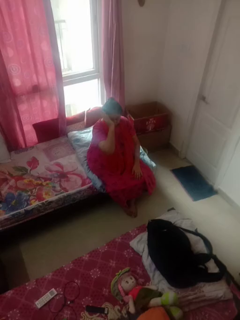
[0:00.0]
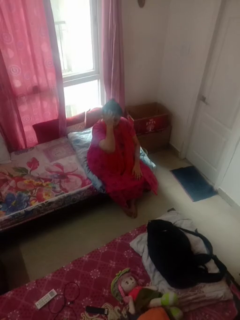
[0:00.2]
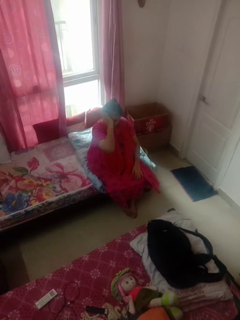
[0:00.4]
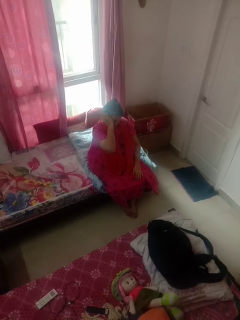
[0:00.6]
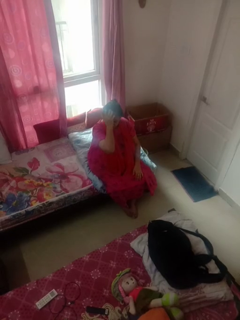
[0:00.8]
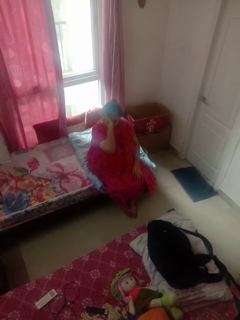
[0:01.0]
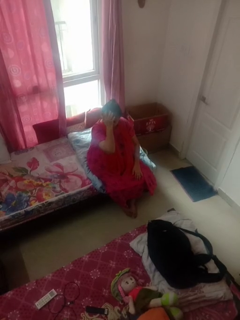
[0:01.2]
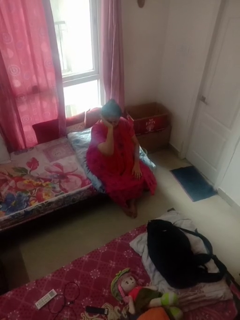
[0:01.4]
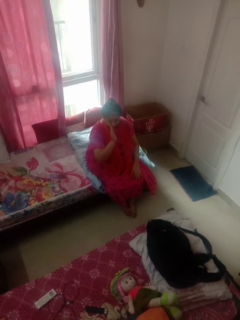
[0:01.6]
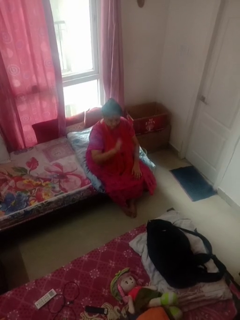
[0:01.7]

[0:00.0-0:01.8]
person rubs eyes

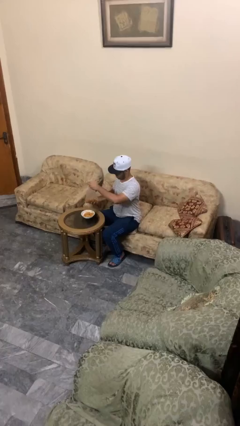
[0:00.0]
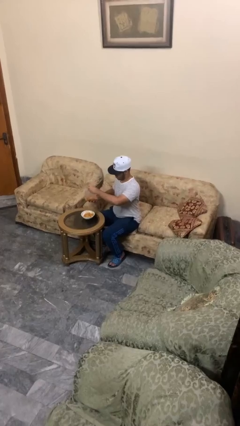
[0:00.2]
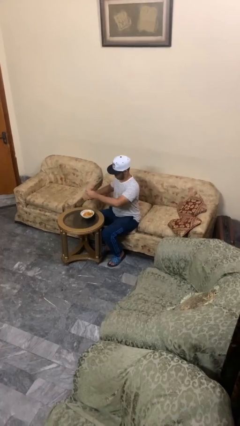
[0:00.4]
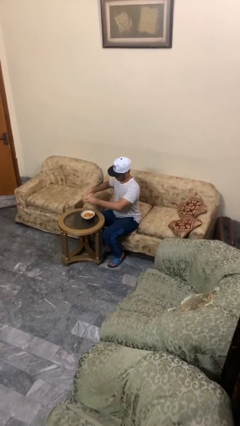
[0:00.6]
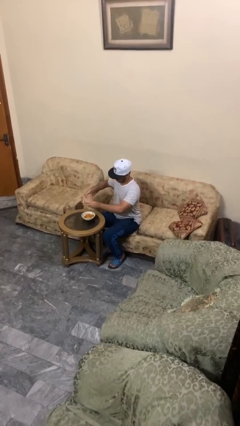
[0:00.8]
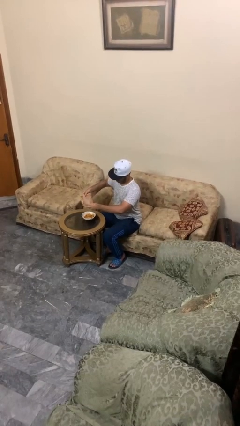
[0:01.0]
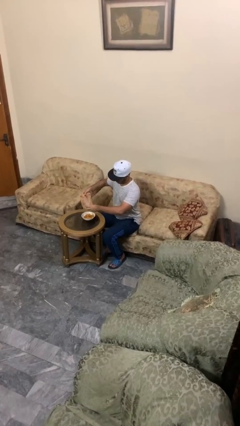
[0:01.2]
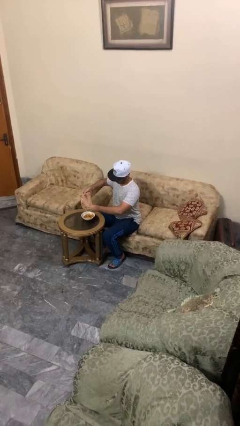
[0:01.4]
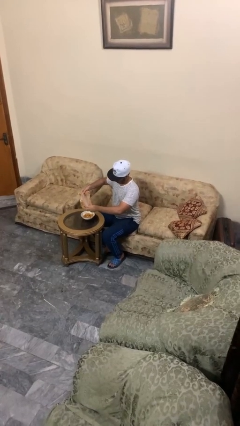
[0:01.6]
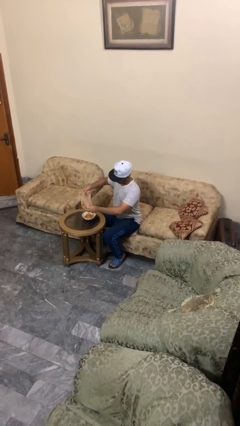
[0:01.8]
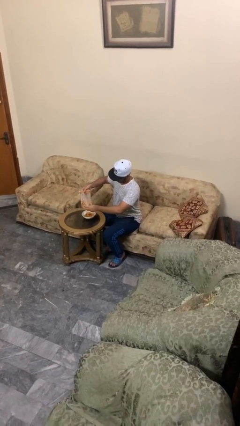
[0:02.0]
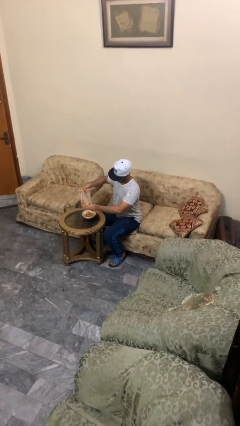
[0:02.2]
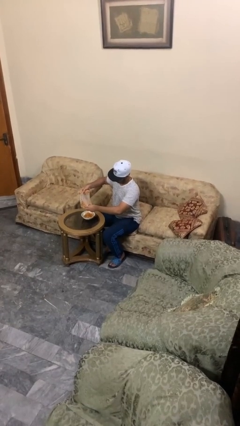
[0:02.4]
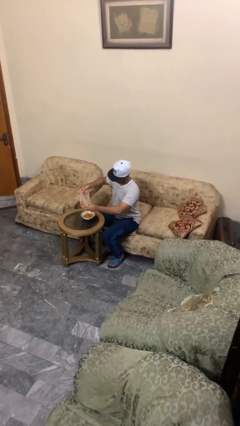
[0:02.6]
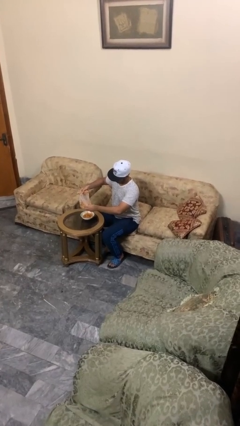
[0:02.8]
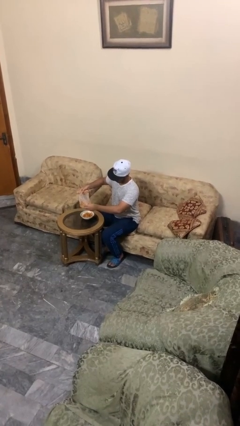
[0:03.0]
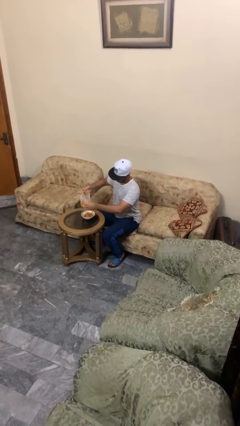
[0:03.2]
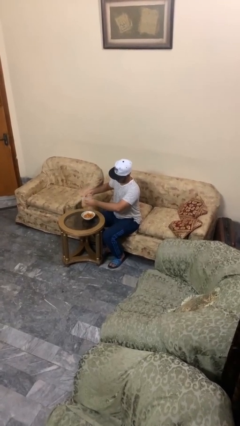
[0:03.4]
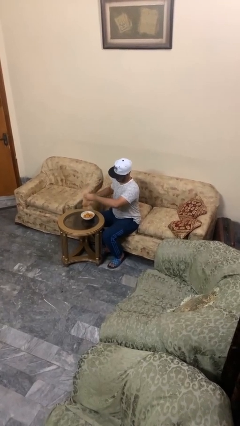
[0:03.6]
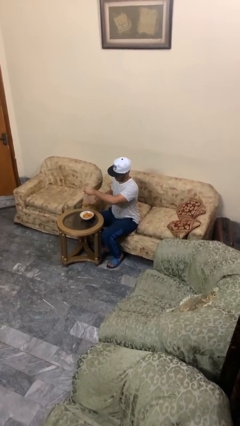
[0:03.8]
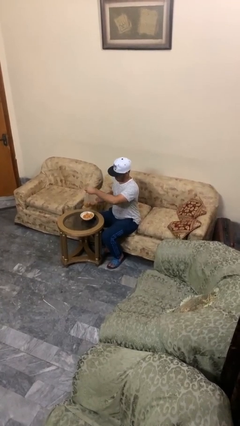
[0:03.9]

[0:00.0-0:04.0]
person pours into bowl

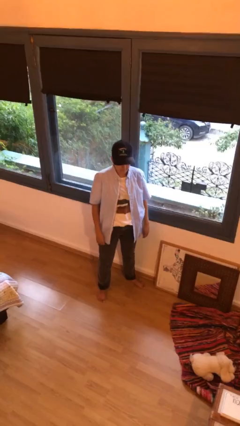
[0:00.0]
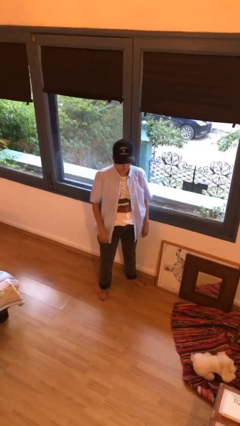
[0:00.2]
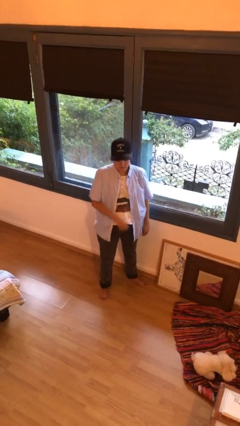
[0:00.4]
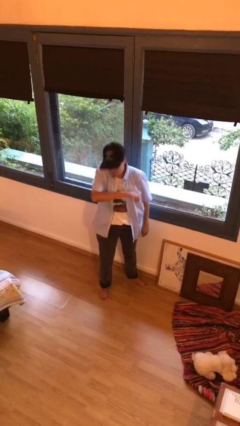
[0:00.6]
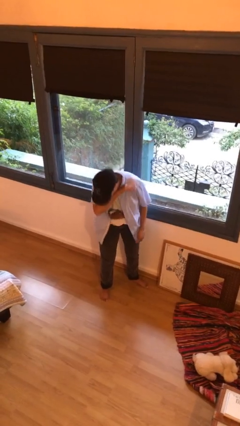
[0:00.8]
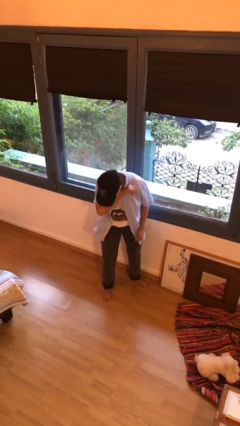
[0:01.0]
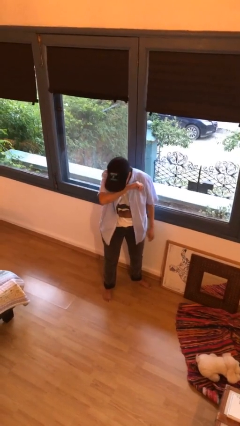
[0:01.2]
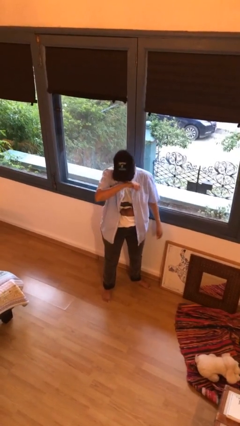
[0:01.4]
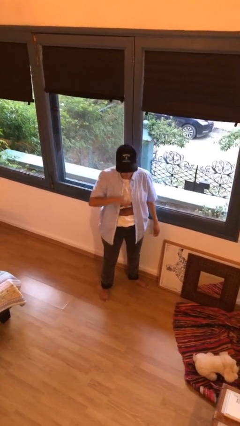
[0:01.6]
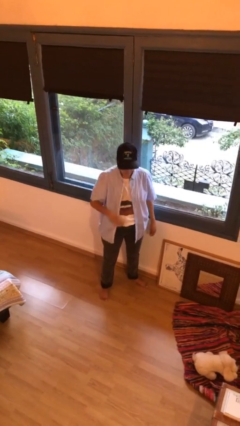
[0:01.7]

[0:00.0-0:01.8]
person sneezes into arm

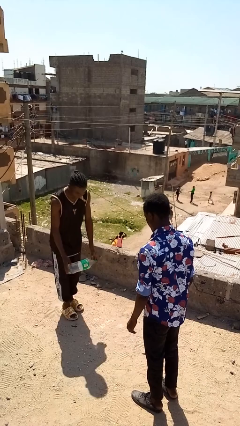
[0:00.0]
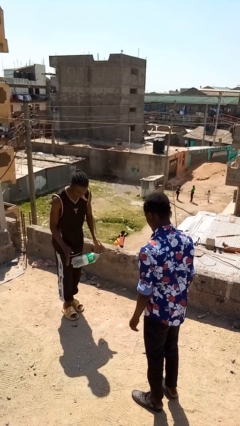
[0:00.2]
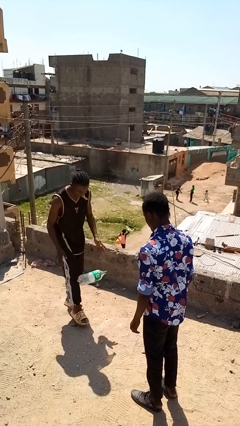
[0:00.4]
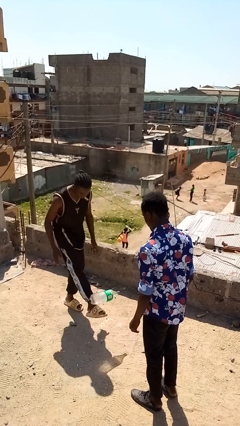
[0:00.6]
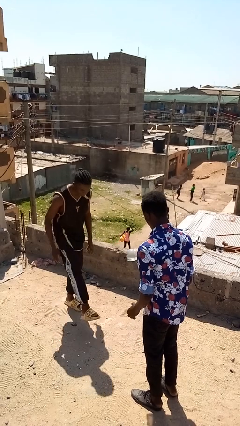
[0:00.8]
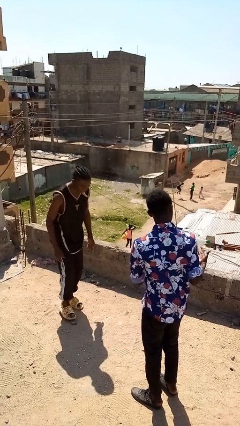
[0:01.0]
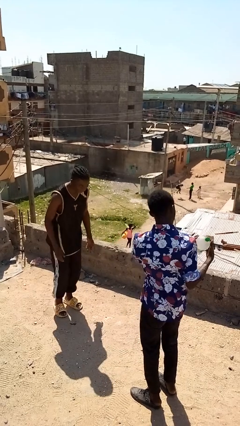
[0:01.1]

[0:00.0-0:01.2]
person kicks object to person

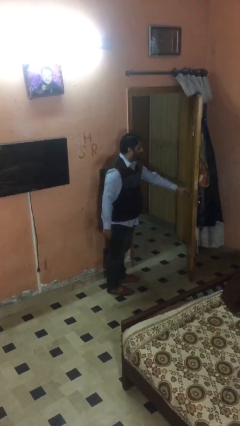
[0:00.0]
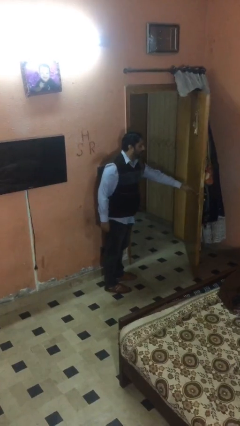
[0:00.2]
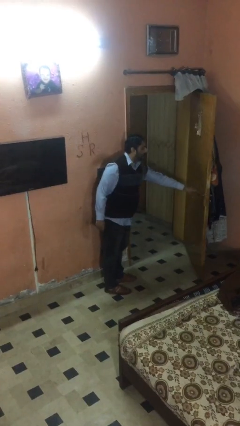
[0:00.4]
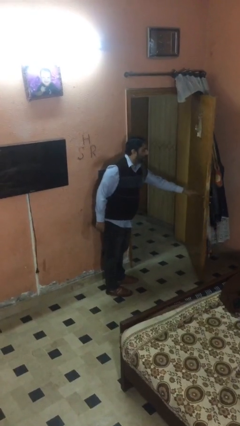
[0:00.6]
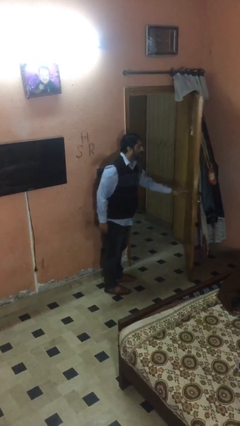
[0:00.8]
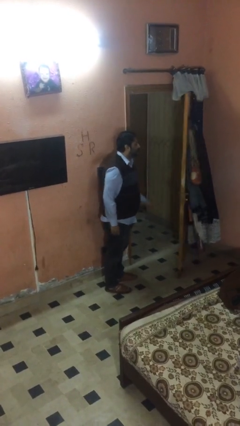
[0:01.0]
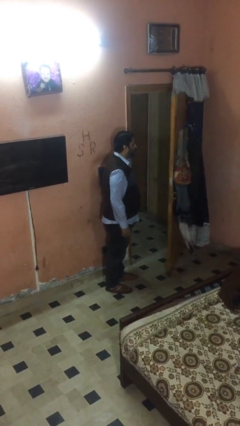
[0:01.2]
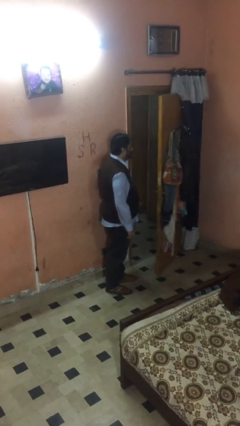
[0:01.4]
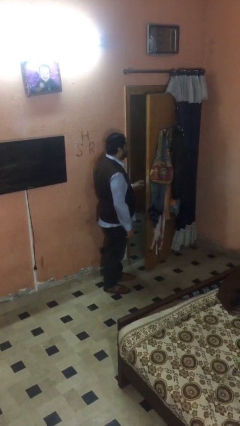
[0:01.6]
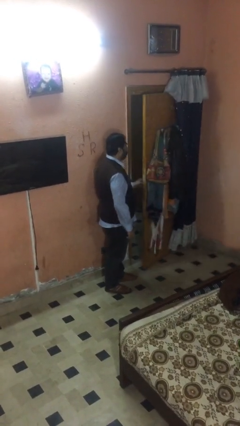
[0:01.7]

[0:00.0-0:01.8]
person closes facility door

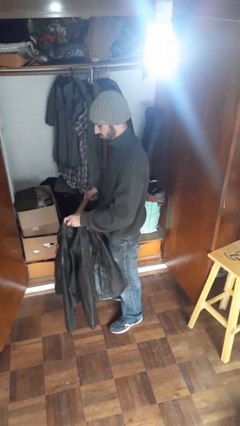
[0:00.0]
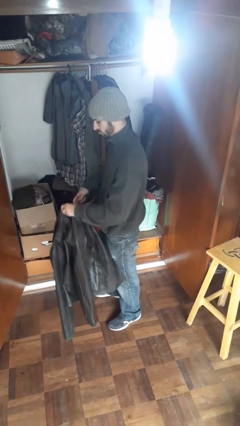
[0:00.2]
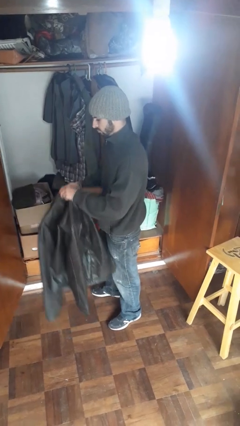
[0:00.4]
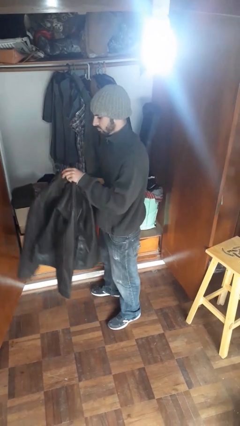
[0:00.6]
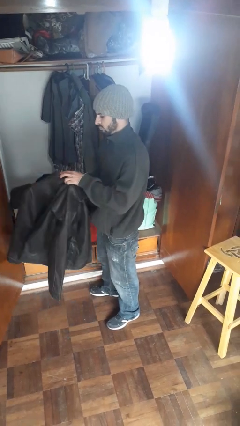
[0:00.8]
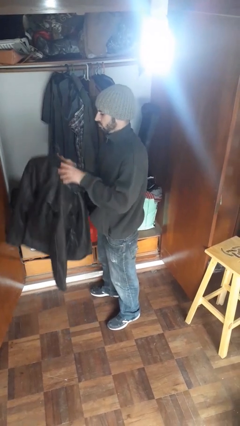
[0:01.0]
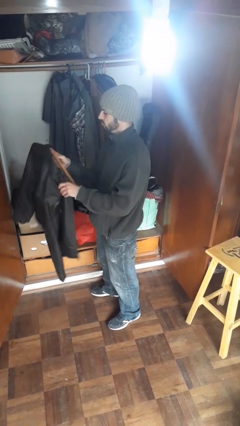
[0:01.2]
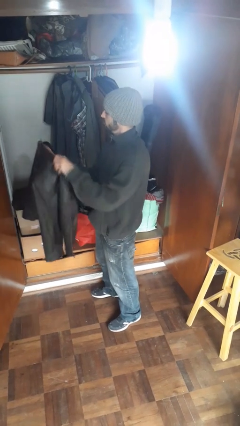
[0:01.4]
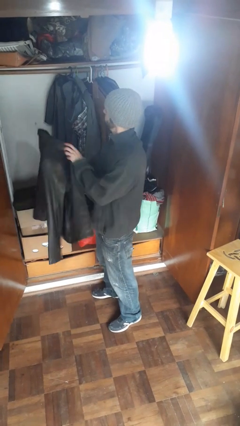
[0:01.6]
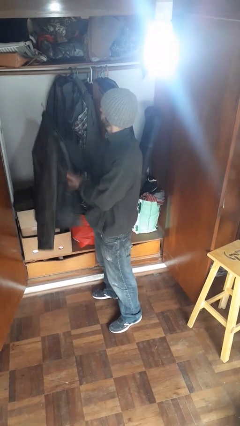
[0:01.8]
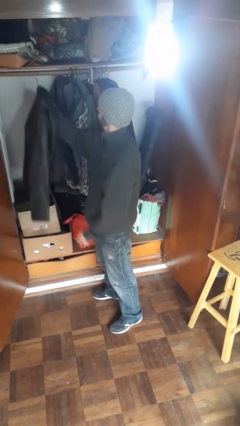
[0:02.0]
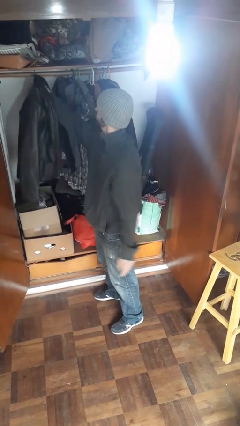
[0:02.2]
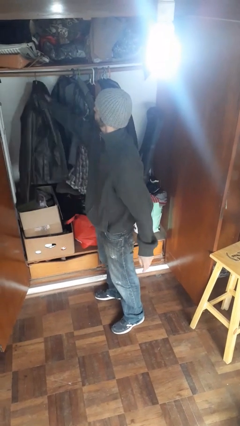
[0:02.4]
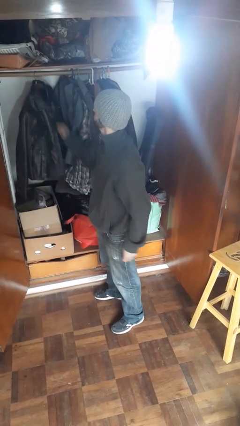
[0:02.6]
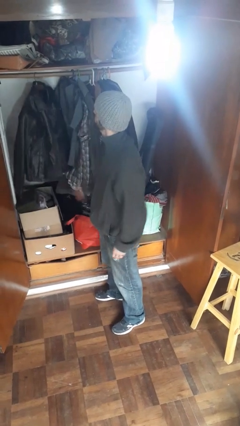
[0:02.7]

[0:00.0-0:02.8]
person puts clothes into closet

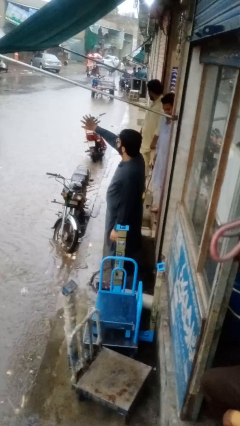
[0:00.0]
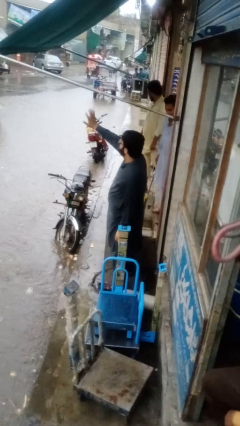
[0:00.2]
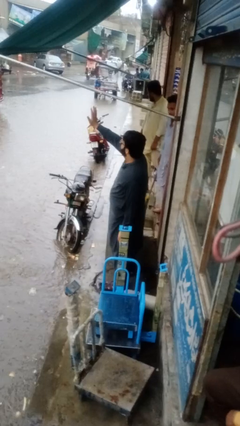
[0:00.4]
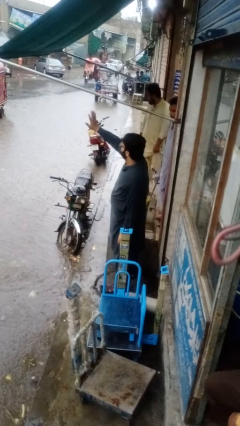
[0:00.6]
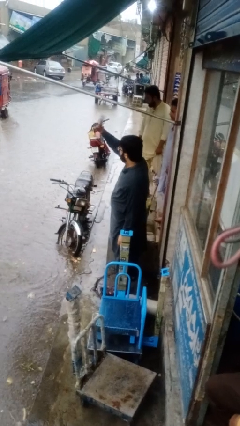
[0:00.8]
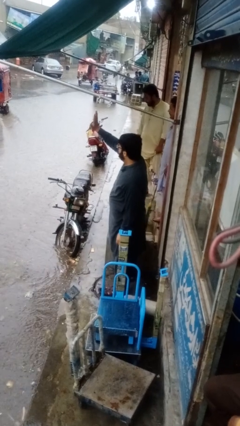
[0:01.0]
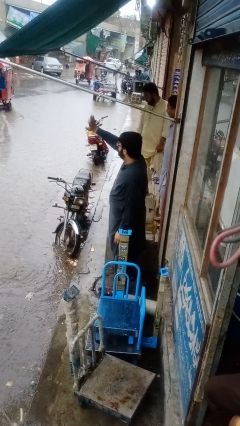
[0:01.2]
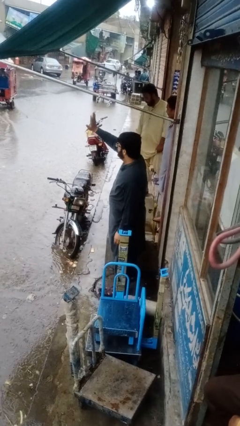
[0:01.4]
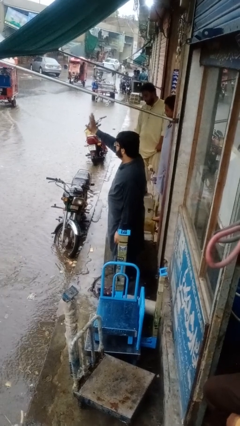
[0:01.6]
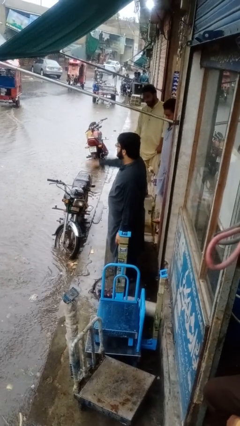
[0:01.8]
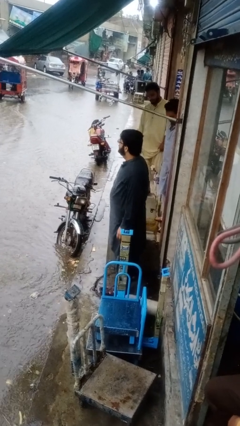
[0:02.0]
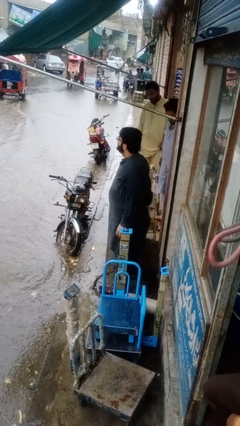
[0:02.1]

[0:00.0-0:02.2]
person waves at person

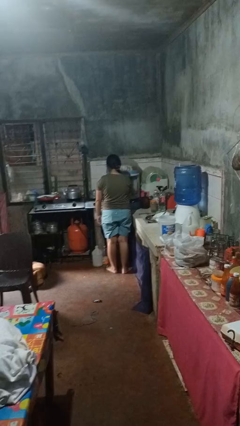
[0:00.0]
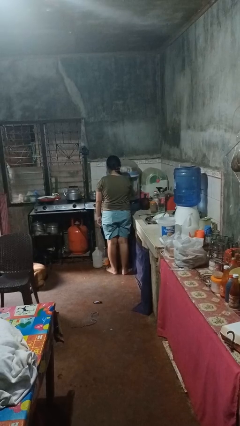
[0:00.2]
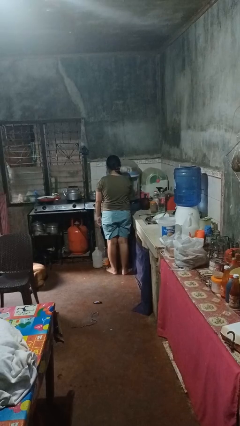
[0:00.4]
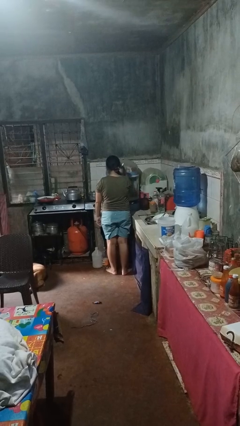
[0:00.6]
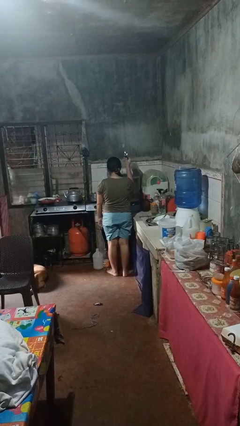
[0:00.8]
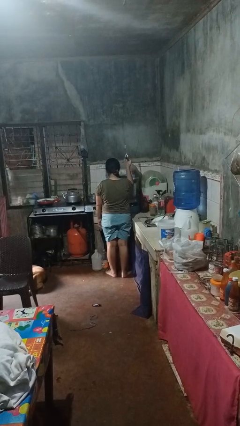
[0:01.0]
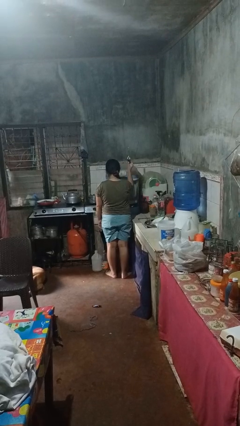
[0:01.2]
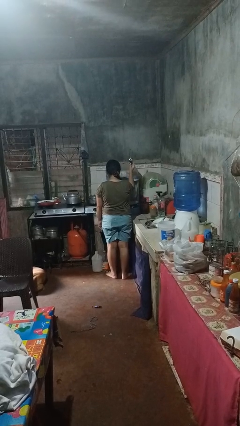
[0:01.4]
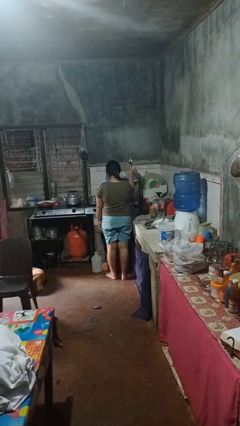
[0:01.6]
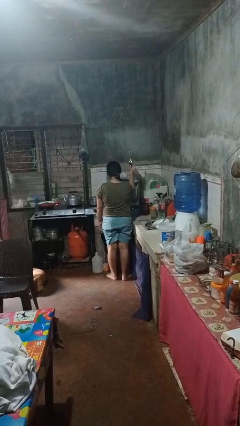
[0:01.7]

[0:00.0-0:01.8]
person takes object from kitchen drawer

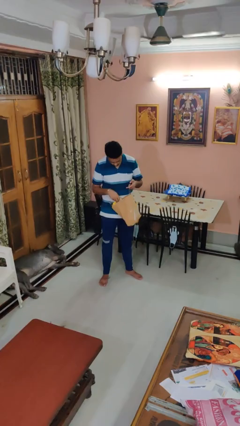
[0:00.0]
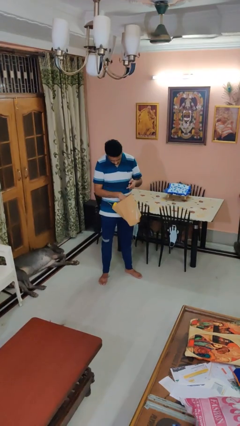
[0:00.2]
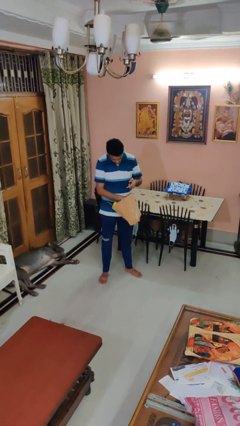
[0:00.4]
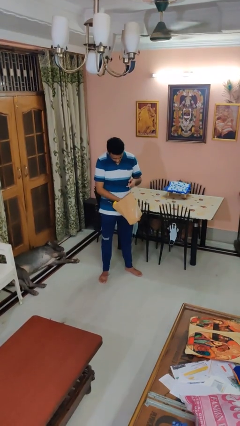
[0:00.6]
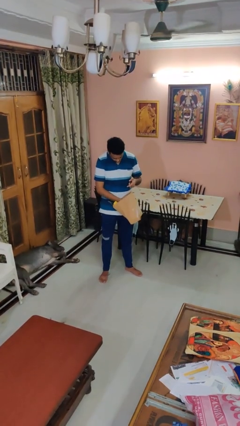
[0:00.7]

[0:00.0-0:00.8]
person puts object into bag
